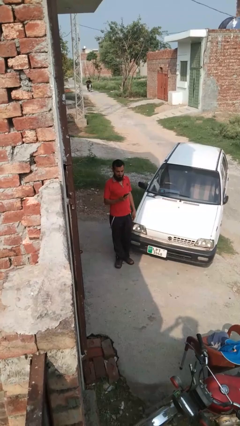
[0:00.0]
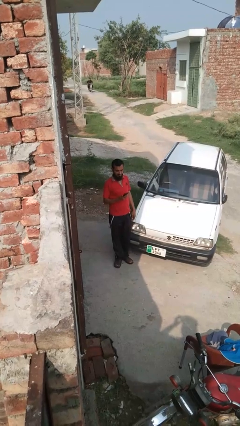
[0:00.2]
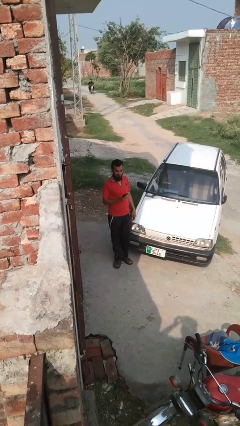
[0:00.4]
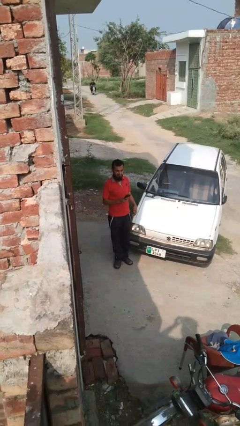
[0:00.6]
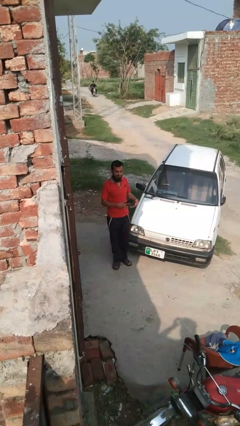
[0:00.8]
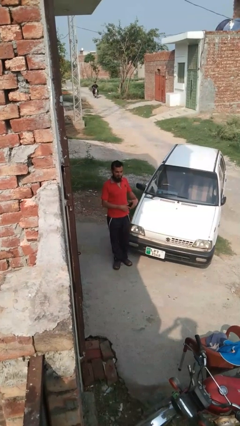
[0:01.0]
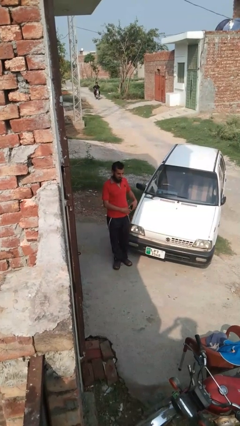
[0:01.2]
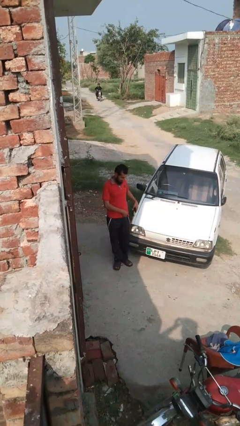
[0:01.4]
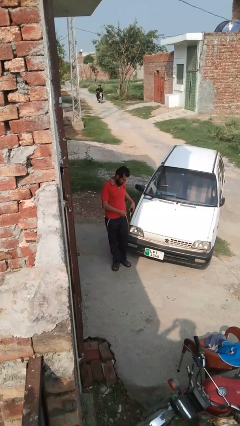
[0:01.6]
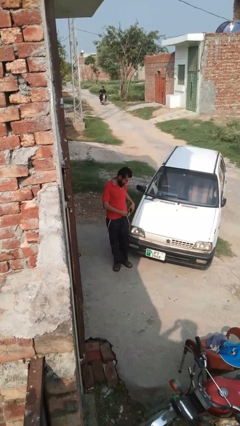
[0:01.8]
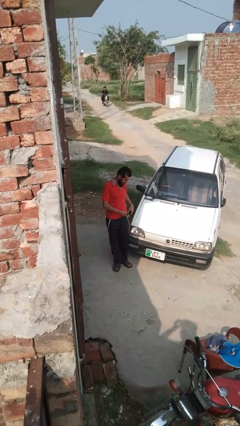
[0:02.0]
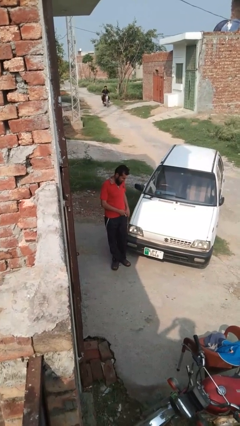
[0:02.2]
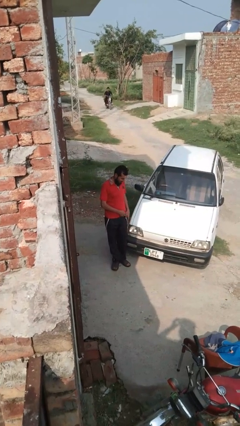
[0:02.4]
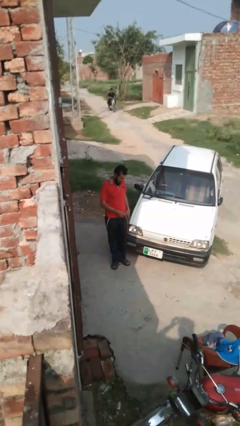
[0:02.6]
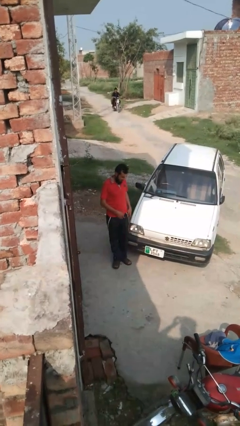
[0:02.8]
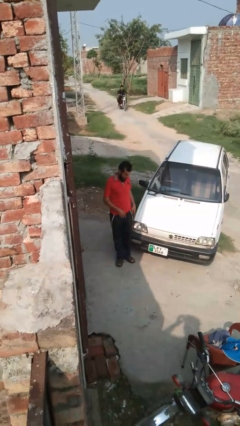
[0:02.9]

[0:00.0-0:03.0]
person puts phone into pocket

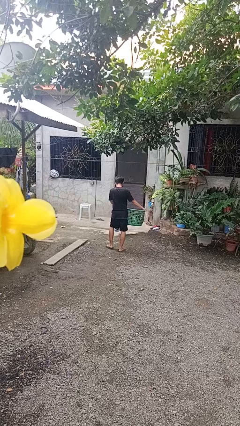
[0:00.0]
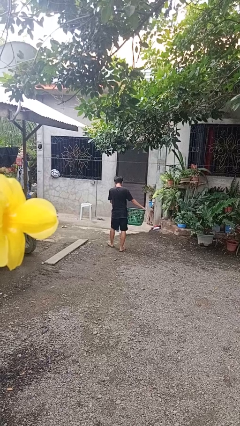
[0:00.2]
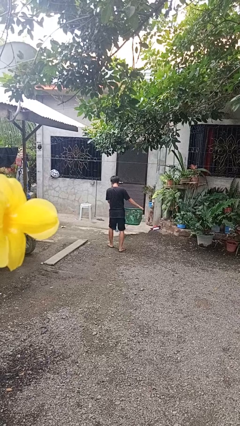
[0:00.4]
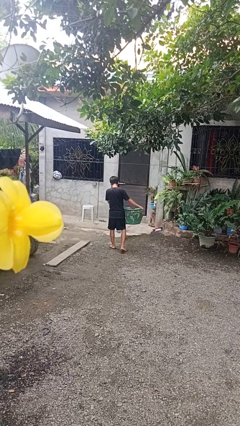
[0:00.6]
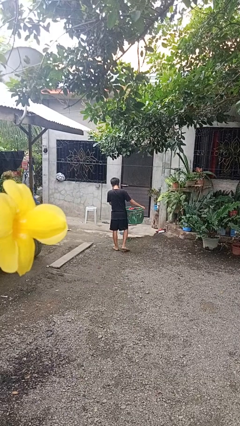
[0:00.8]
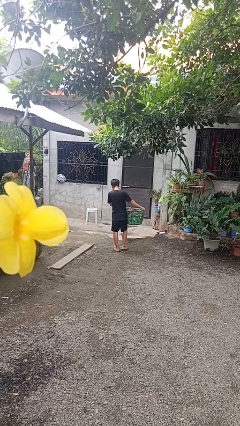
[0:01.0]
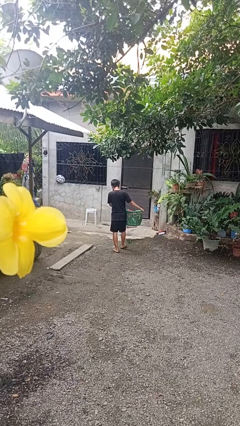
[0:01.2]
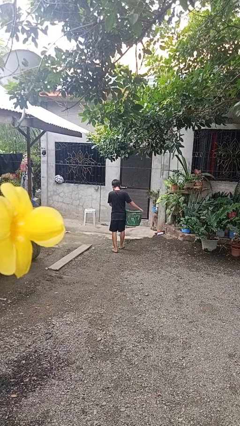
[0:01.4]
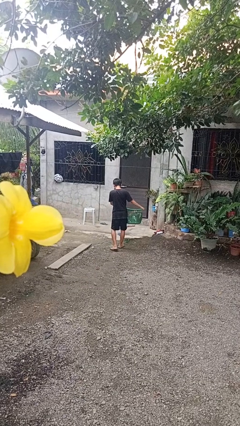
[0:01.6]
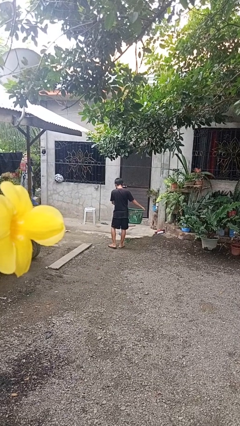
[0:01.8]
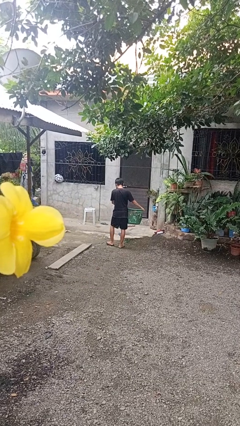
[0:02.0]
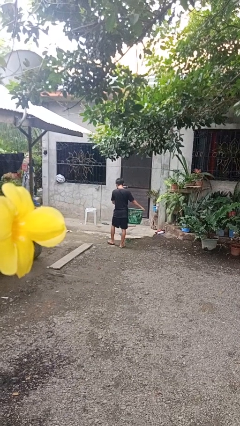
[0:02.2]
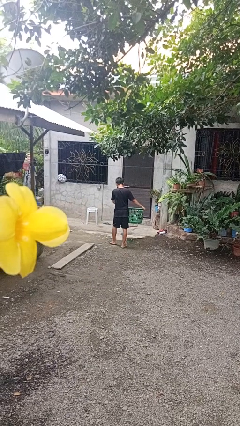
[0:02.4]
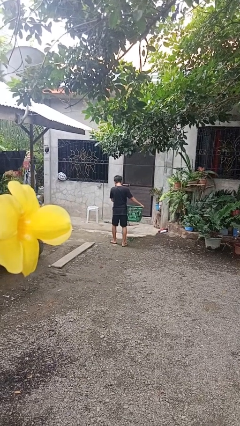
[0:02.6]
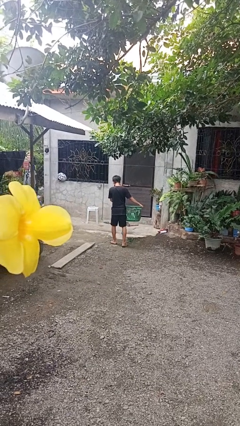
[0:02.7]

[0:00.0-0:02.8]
person carries laundry basket

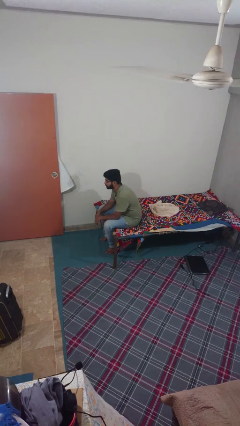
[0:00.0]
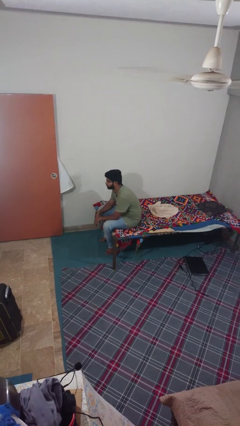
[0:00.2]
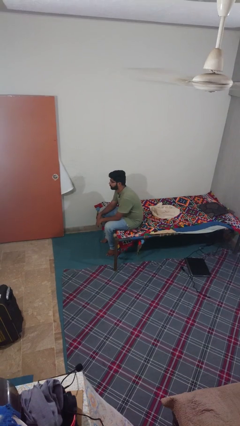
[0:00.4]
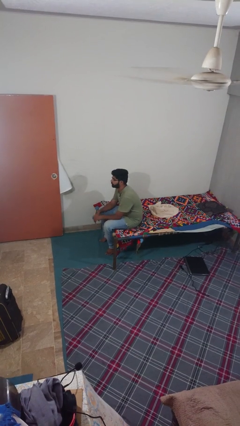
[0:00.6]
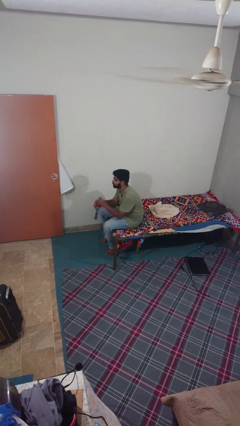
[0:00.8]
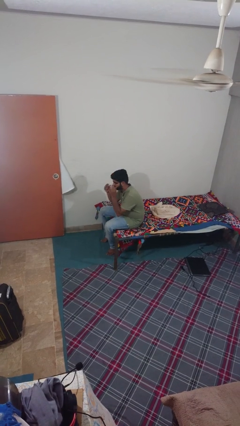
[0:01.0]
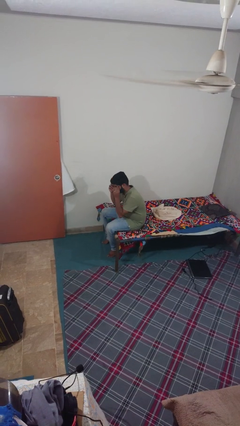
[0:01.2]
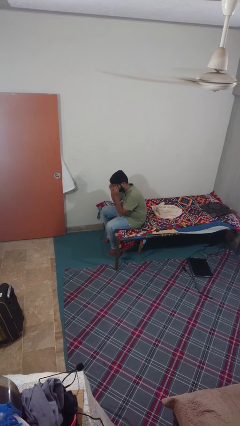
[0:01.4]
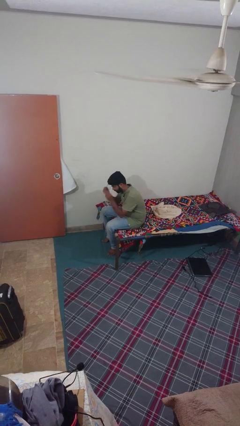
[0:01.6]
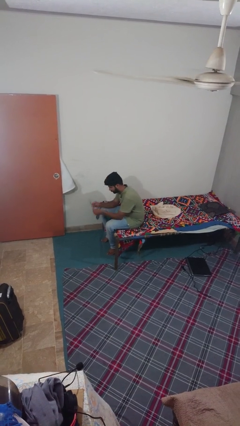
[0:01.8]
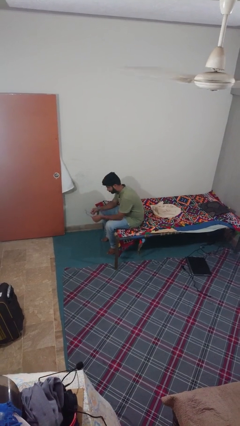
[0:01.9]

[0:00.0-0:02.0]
person takes off glasses

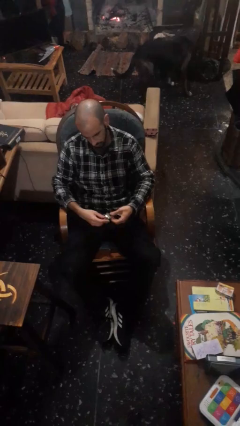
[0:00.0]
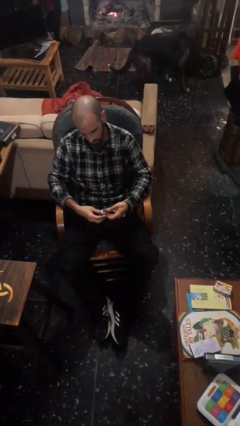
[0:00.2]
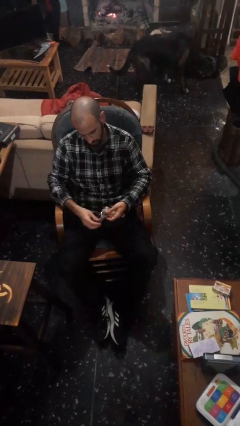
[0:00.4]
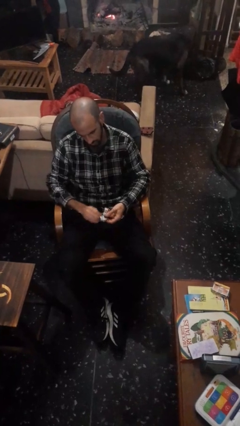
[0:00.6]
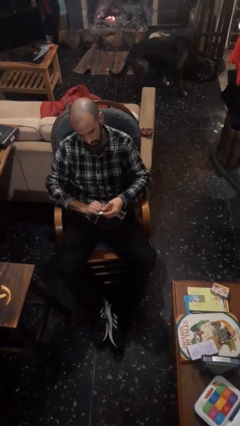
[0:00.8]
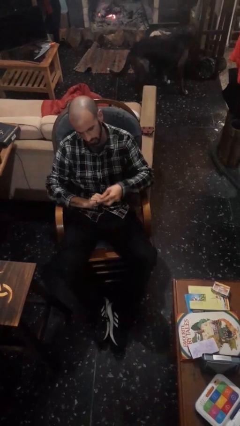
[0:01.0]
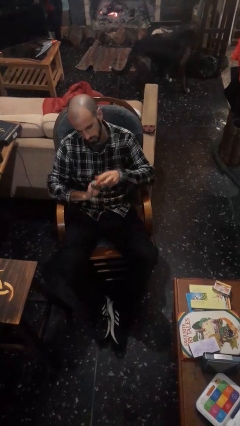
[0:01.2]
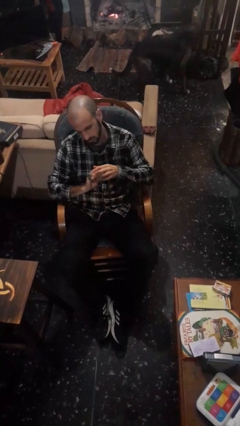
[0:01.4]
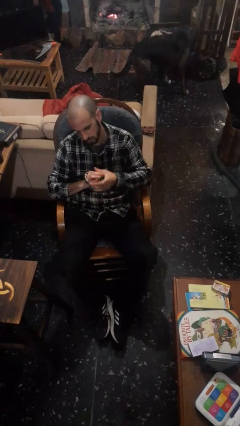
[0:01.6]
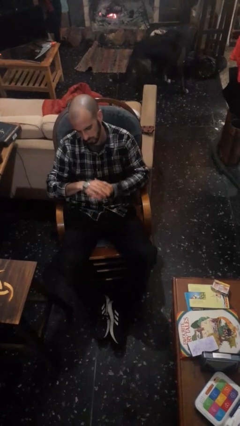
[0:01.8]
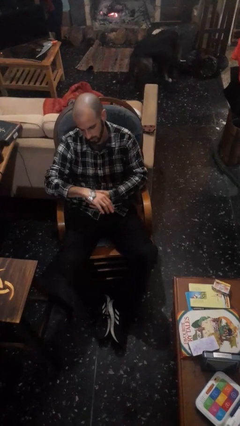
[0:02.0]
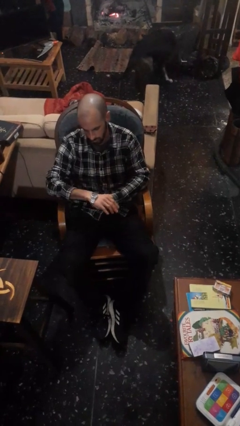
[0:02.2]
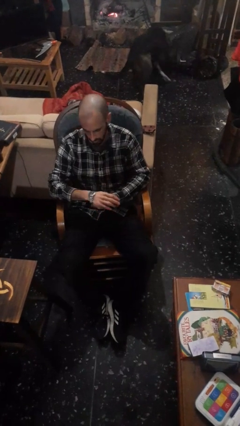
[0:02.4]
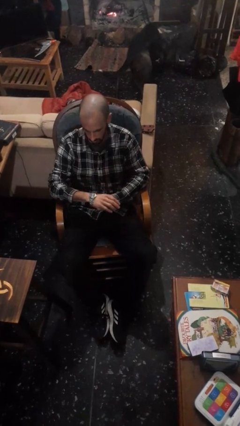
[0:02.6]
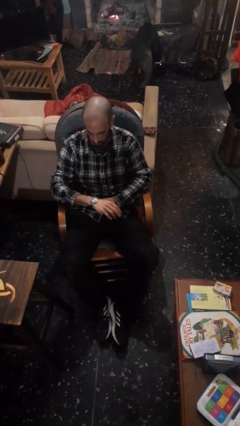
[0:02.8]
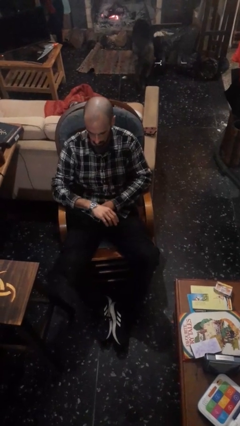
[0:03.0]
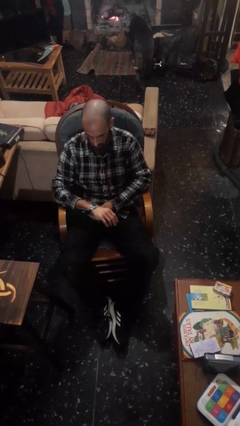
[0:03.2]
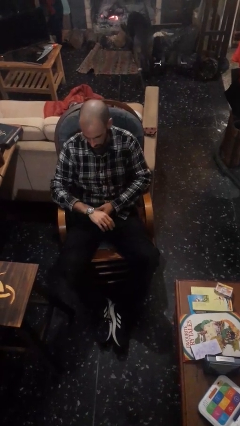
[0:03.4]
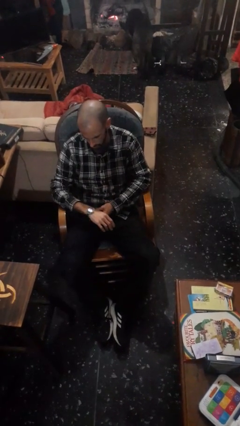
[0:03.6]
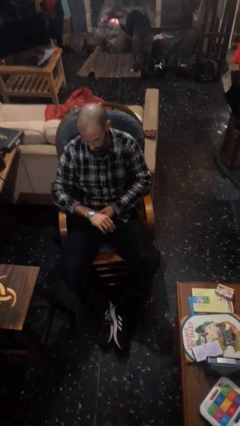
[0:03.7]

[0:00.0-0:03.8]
person puts on wristwatch

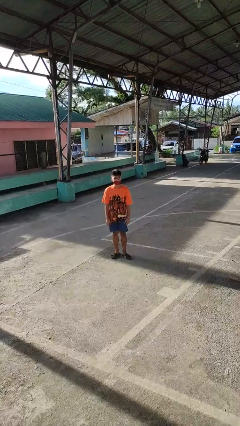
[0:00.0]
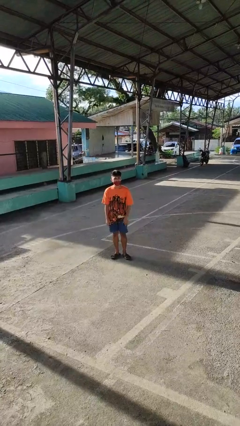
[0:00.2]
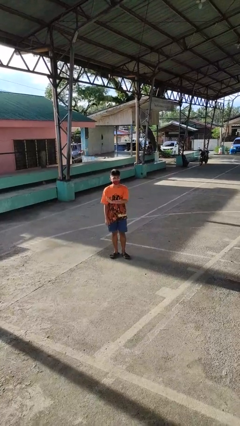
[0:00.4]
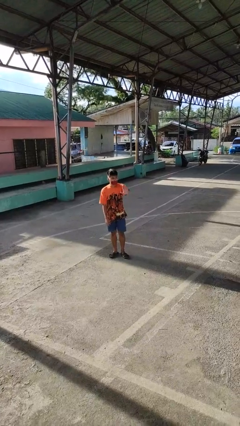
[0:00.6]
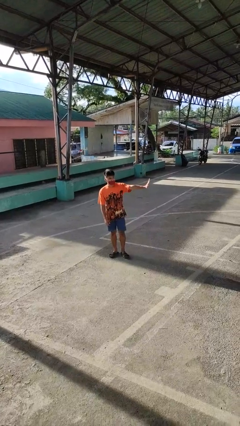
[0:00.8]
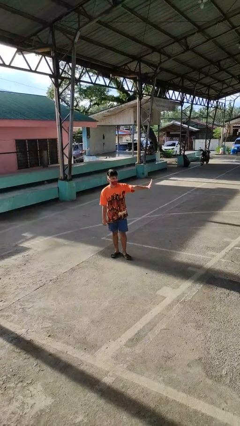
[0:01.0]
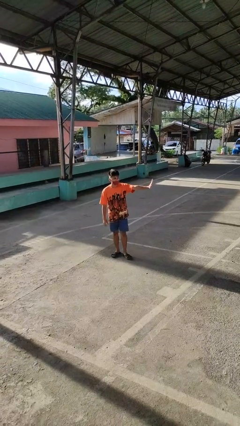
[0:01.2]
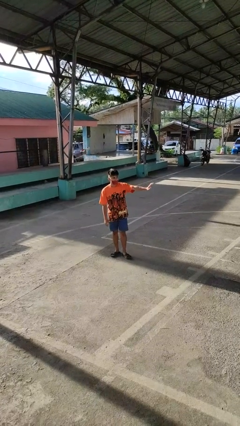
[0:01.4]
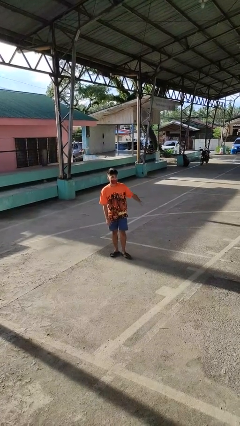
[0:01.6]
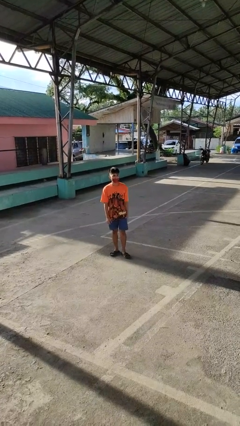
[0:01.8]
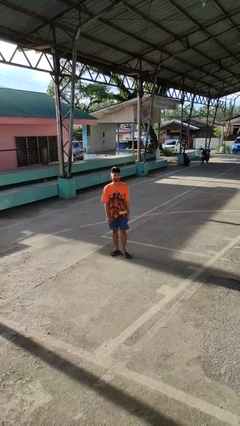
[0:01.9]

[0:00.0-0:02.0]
person gestures swipe left

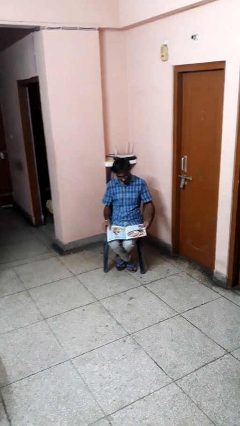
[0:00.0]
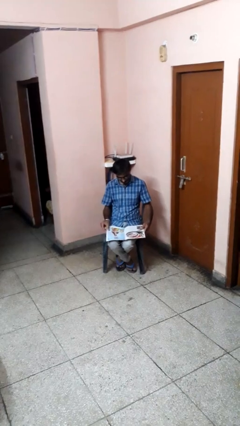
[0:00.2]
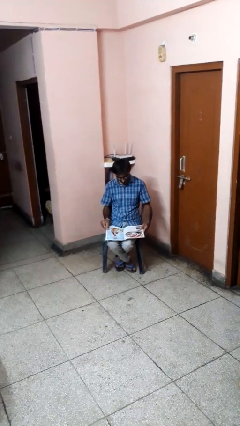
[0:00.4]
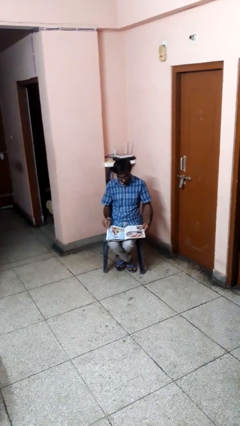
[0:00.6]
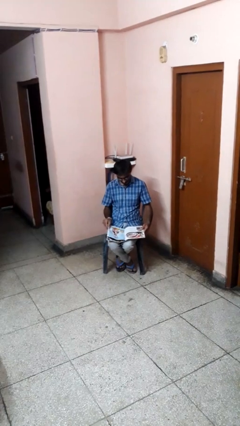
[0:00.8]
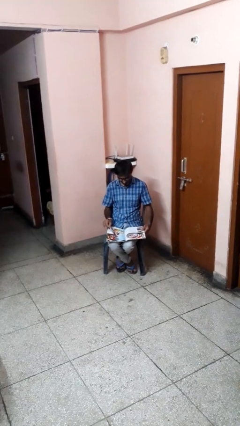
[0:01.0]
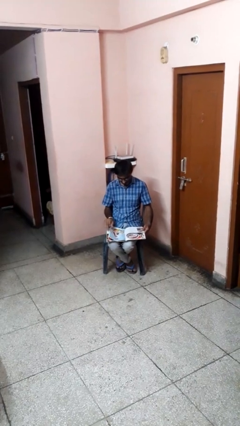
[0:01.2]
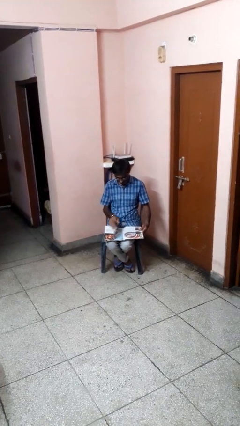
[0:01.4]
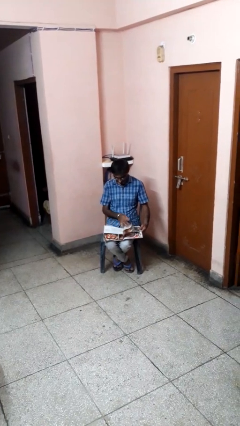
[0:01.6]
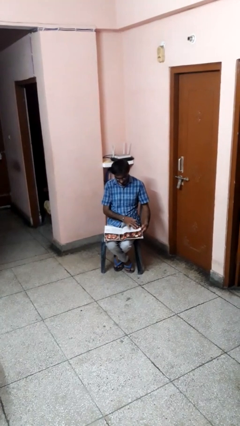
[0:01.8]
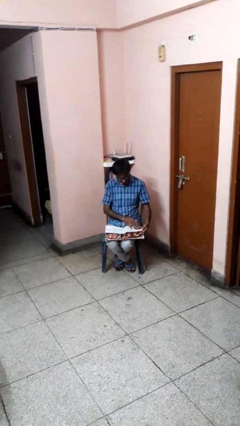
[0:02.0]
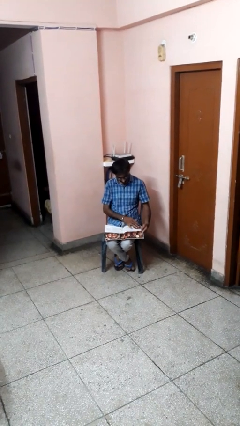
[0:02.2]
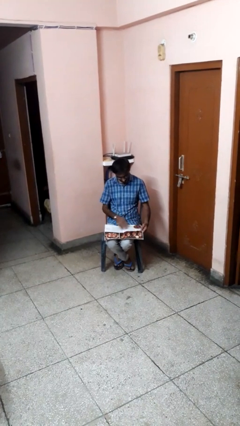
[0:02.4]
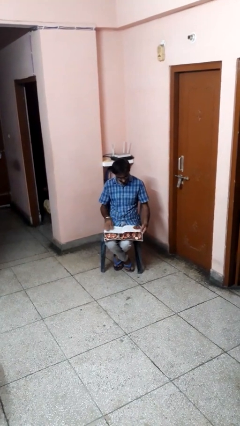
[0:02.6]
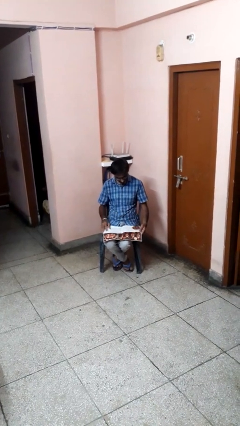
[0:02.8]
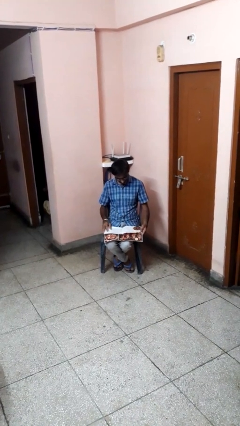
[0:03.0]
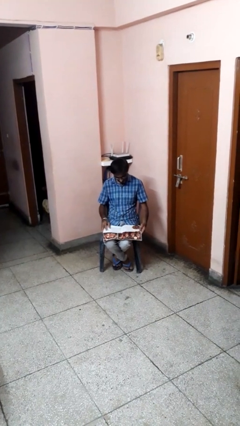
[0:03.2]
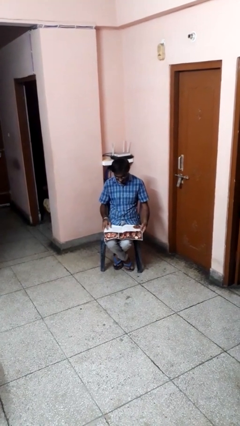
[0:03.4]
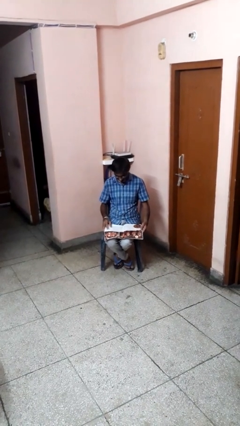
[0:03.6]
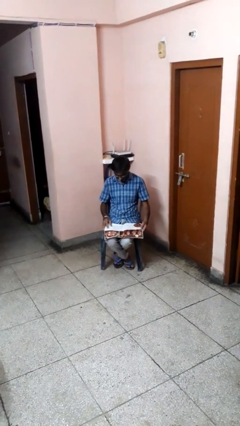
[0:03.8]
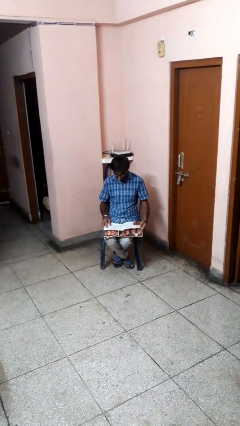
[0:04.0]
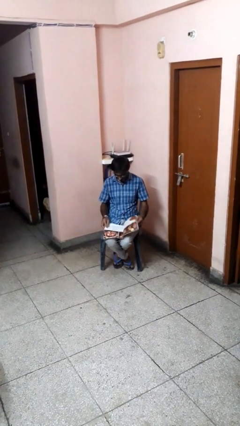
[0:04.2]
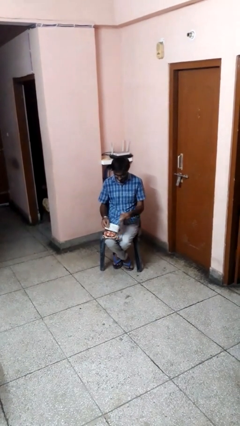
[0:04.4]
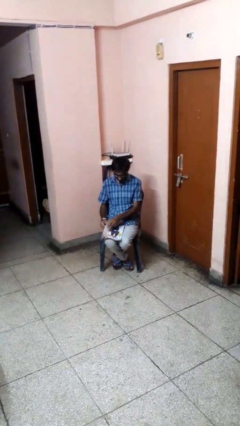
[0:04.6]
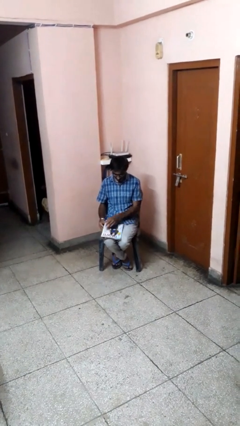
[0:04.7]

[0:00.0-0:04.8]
person reads magazine
